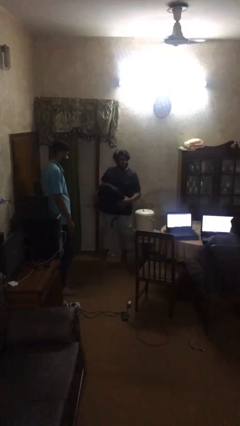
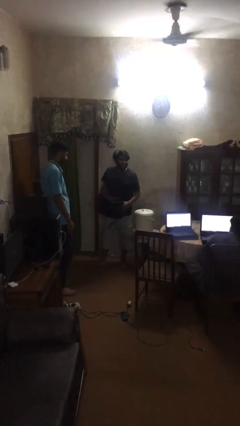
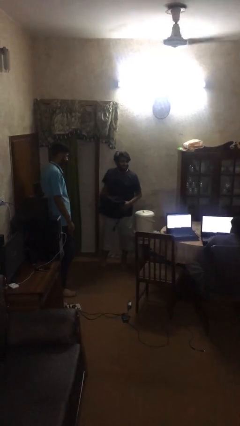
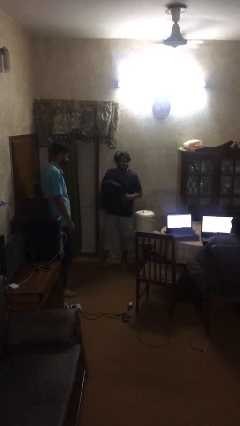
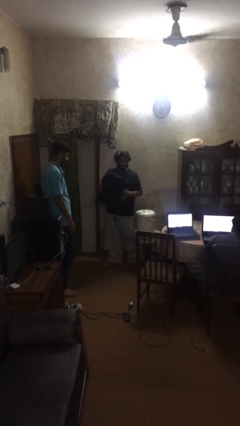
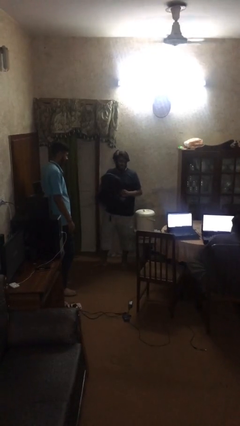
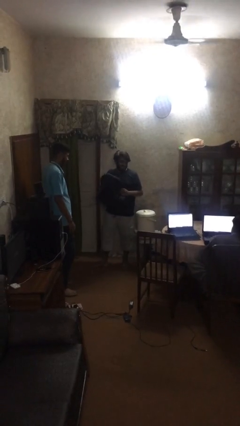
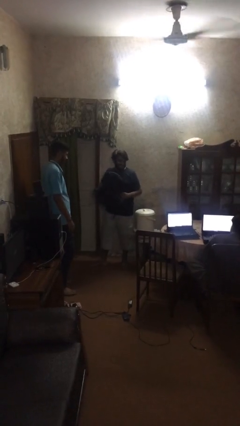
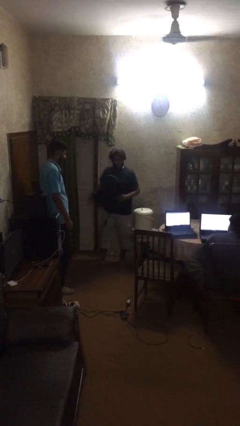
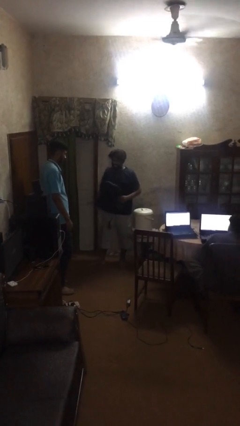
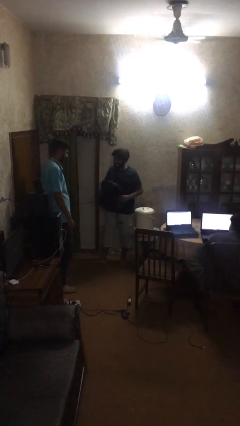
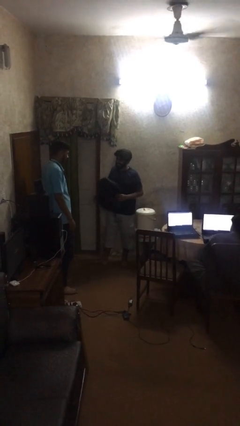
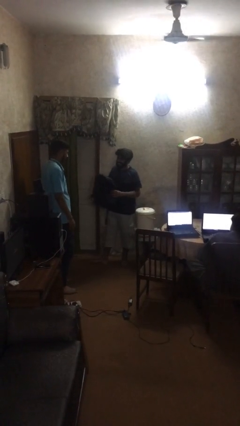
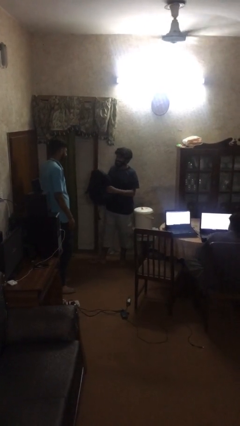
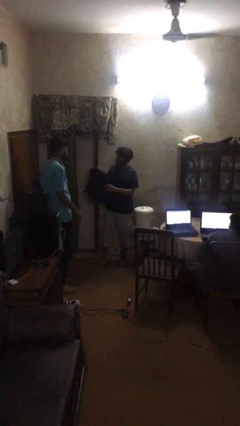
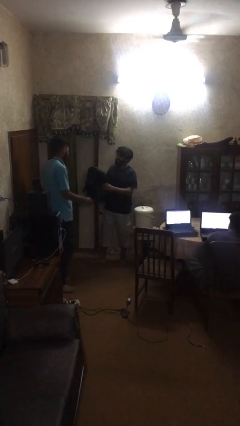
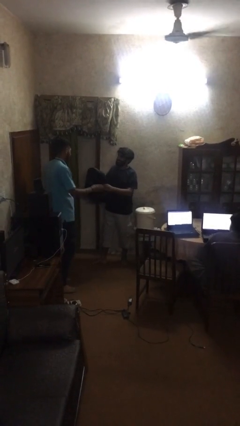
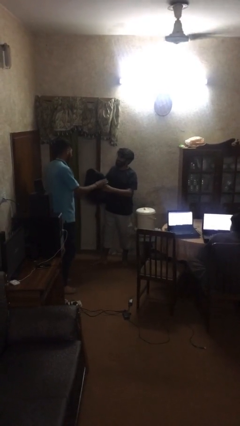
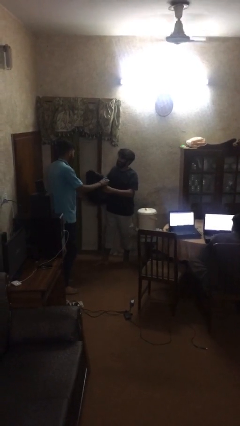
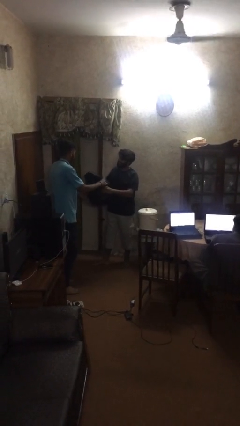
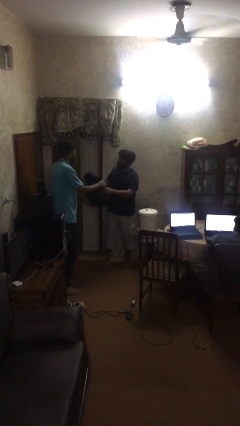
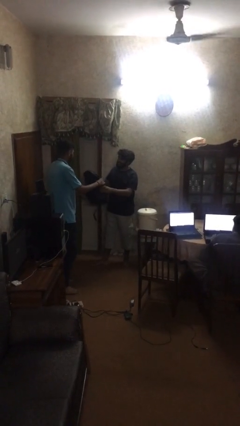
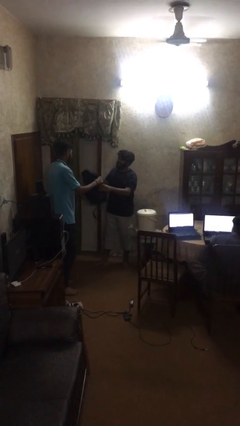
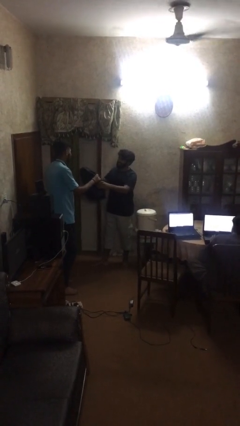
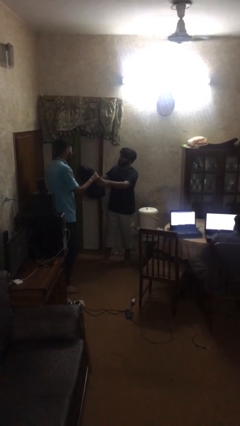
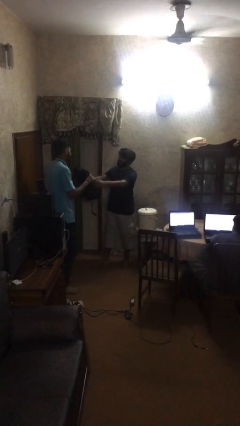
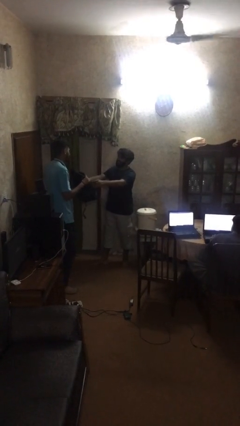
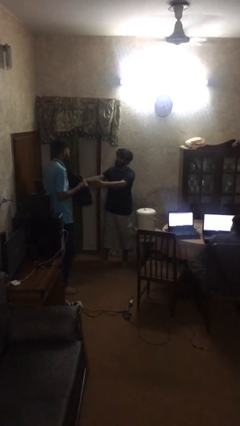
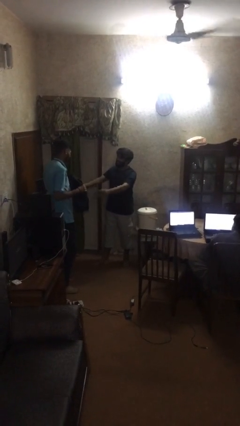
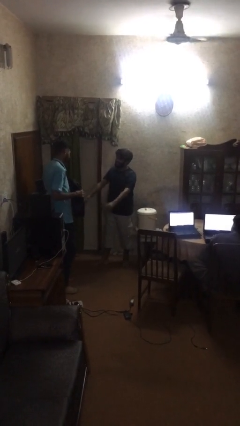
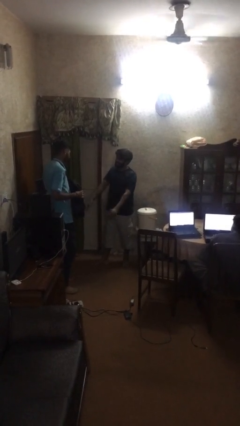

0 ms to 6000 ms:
person transfers object to person

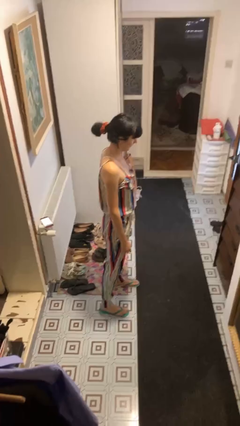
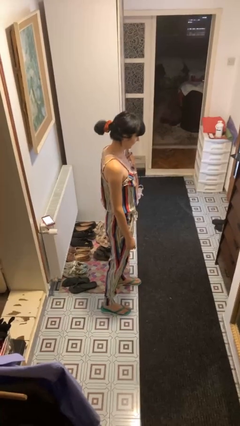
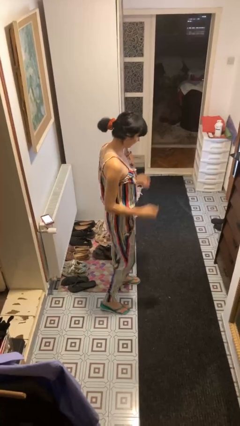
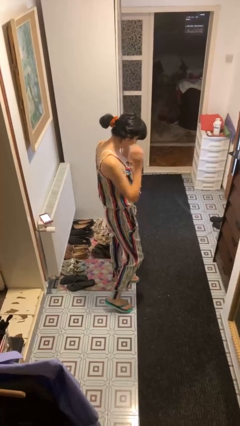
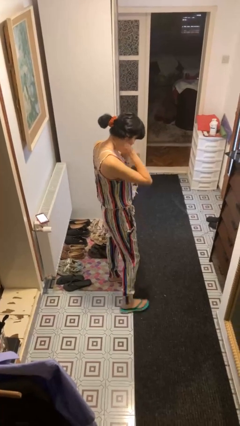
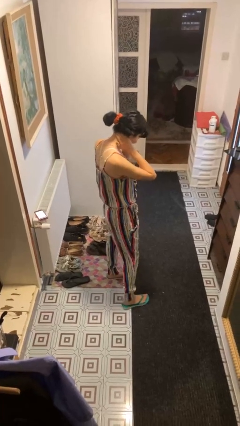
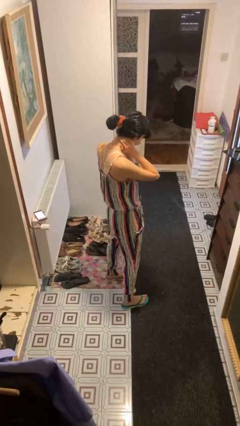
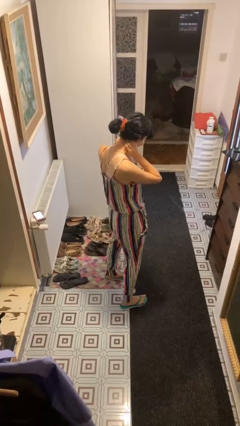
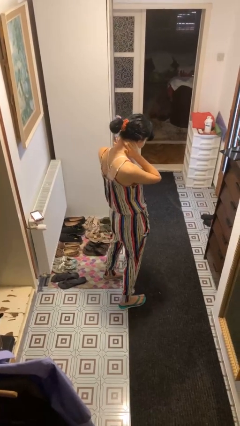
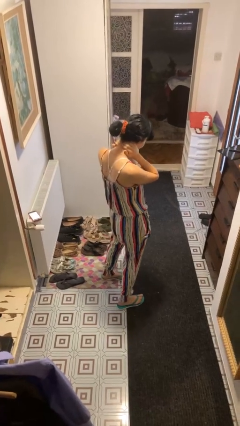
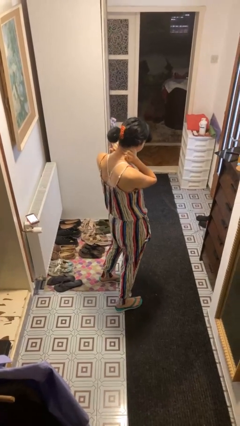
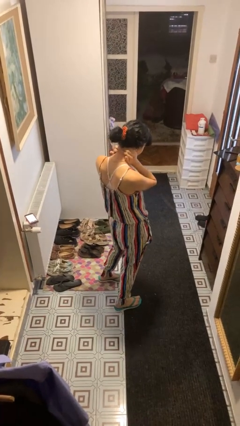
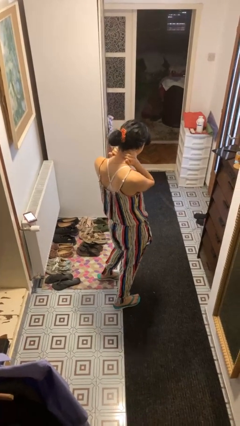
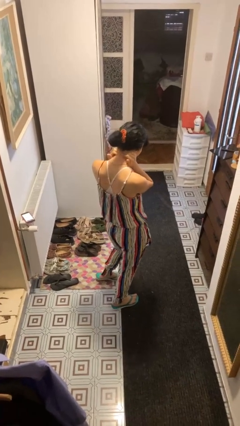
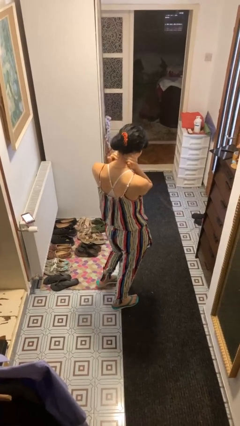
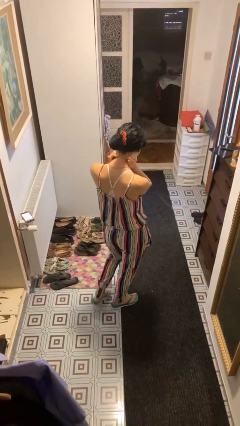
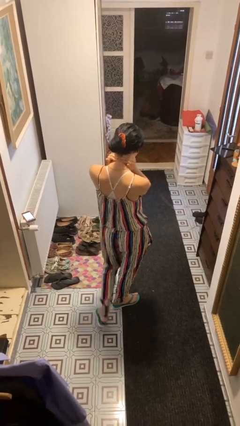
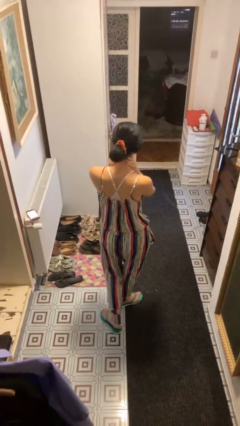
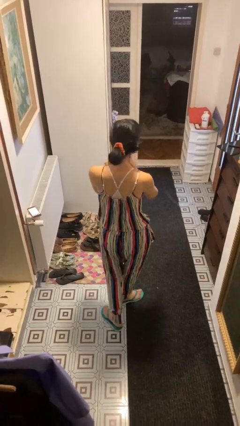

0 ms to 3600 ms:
person rubs neck

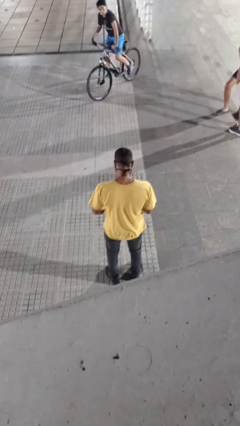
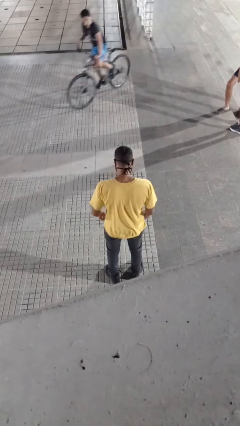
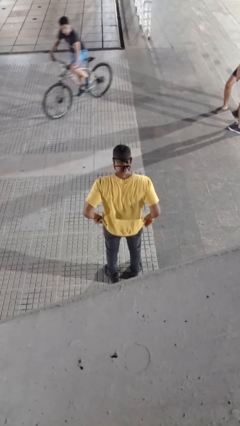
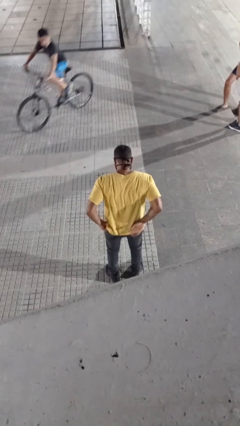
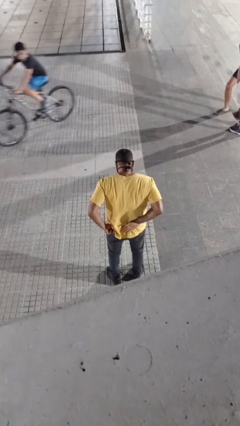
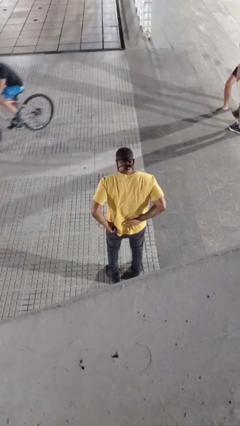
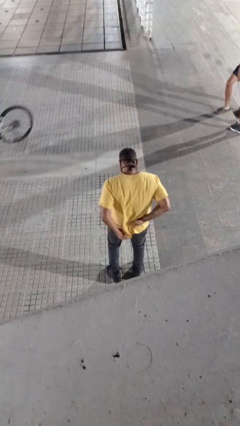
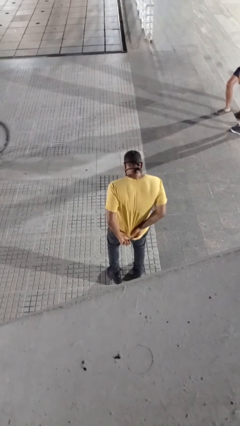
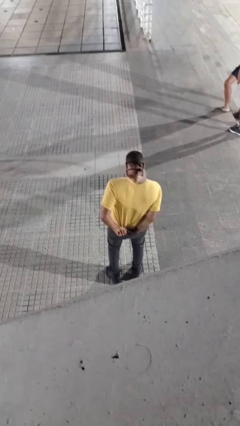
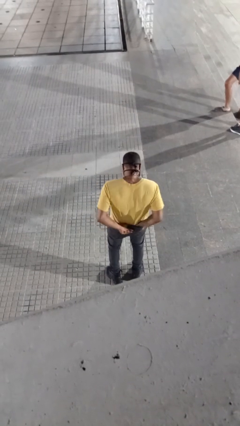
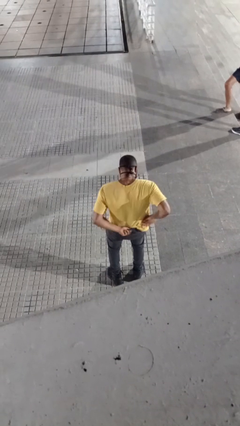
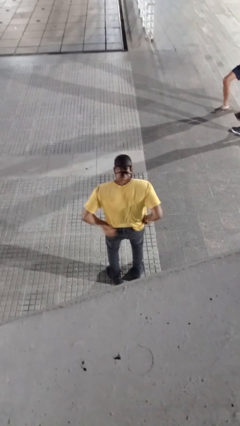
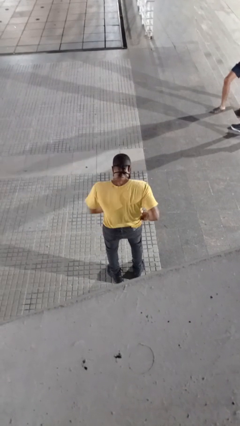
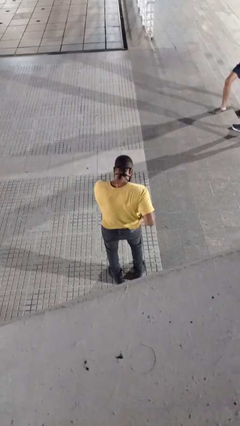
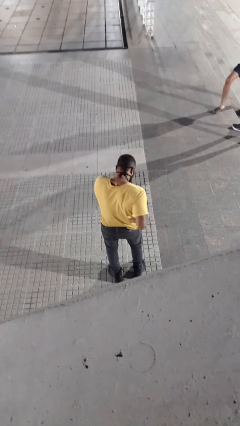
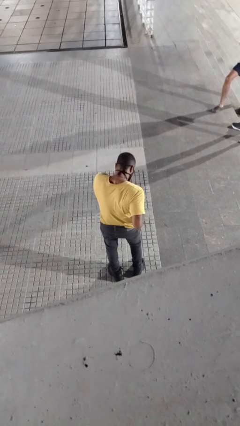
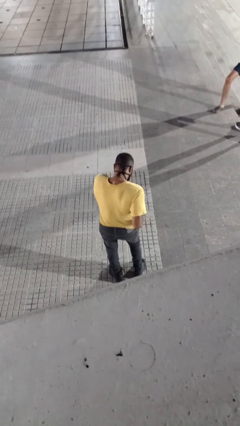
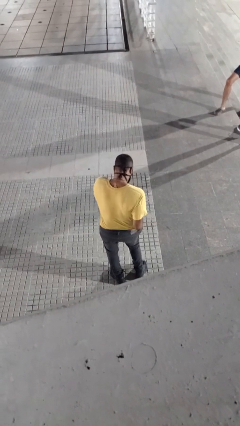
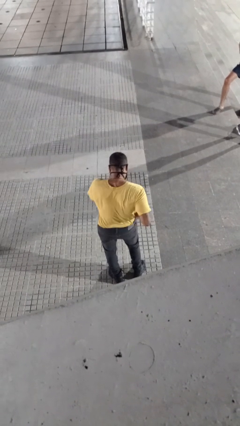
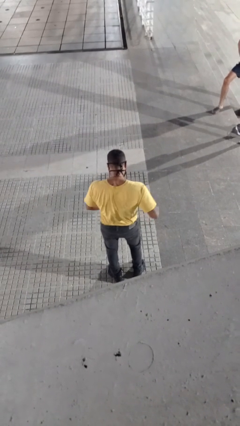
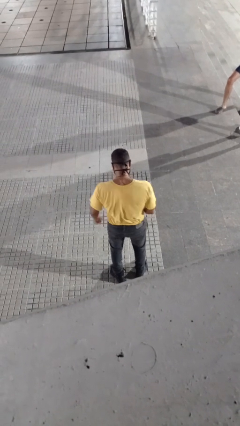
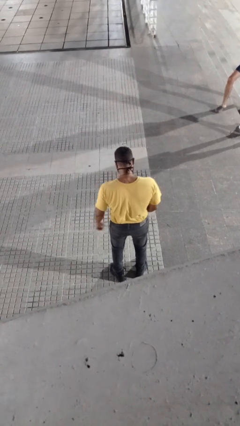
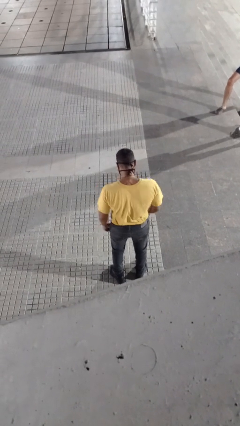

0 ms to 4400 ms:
person tucks in shirt

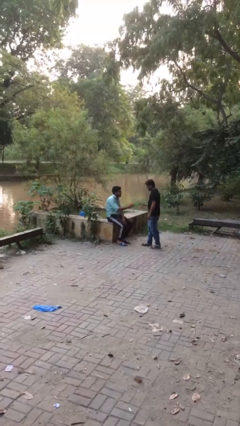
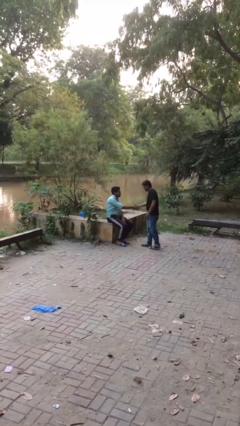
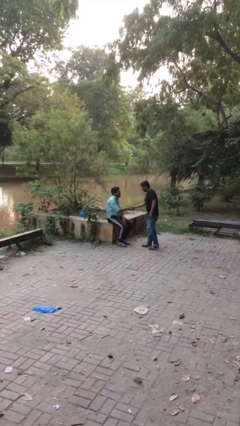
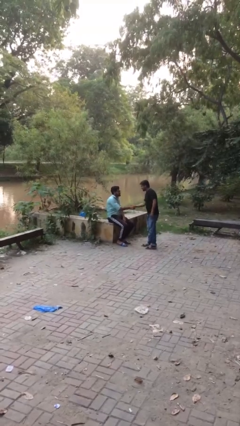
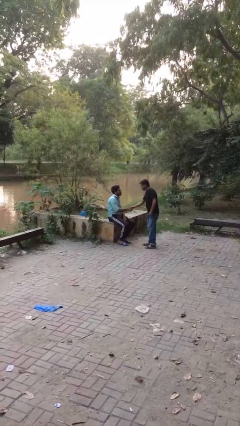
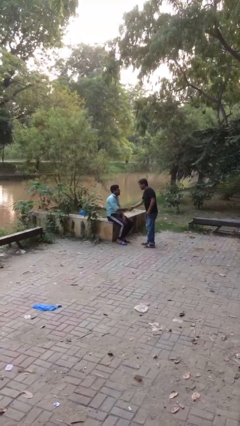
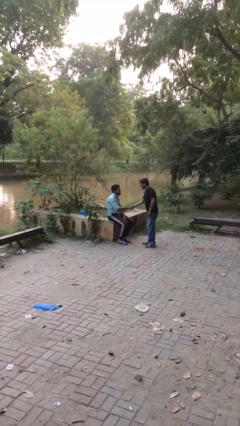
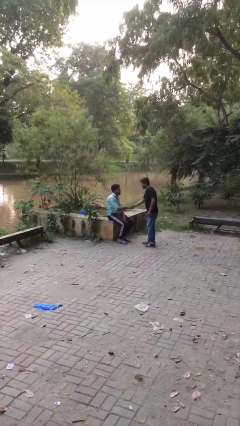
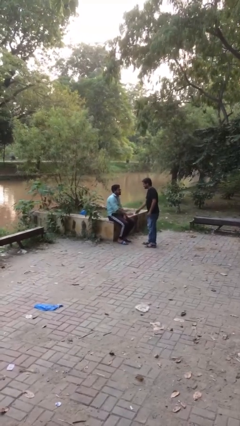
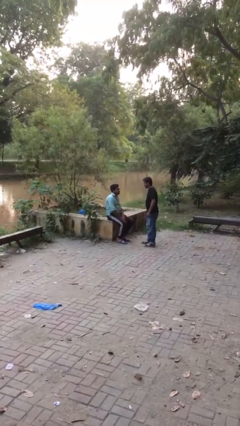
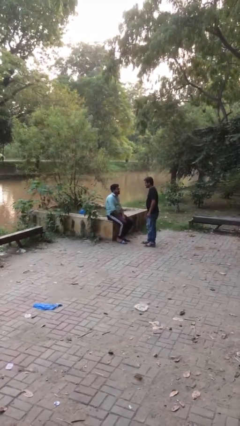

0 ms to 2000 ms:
person shakes hand

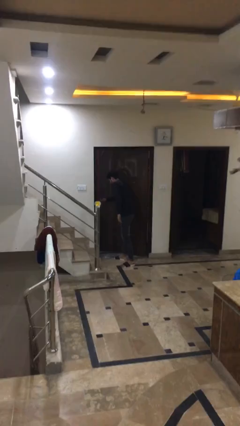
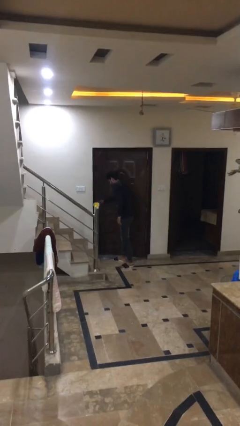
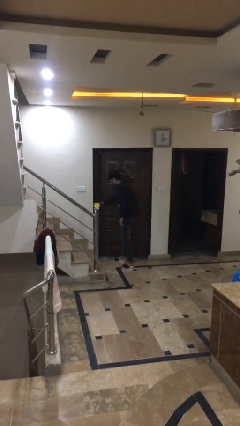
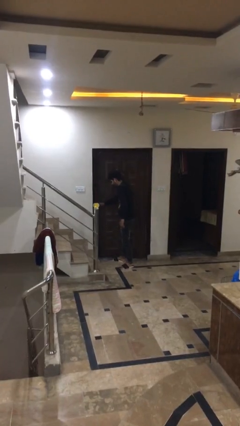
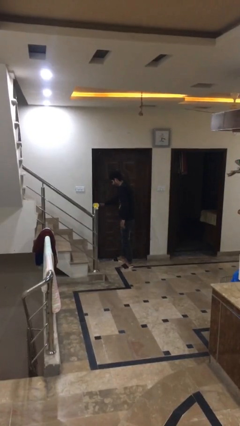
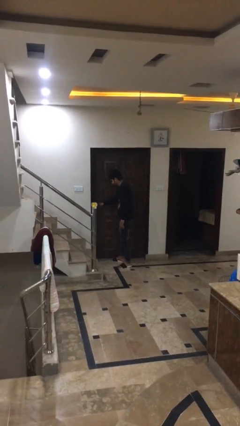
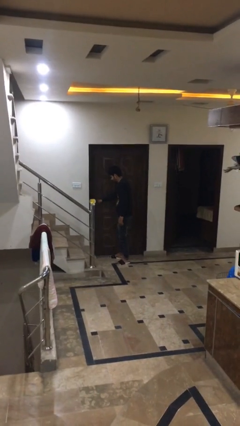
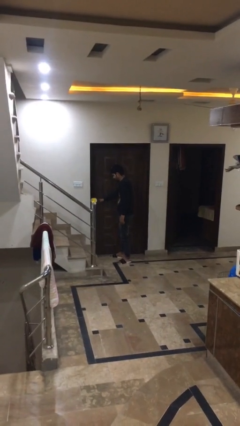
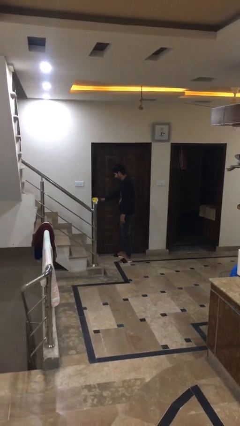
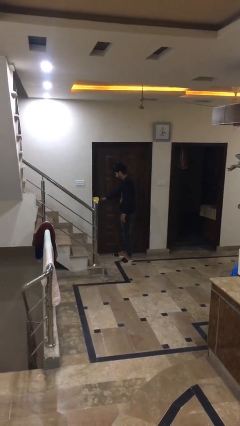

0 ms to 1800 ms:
person closes facility door
